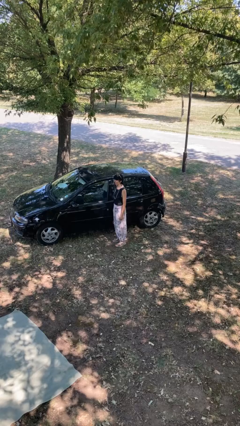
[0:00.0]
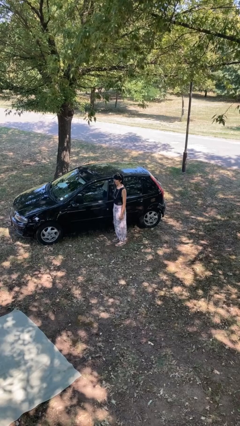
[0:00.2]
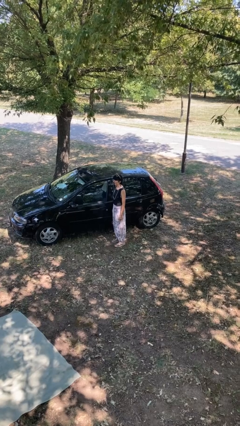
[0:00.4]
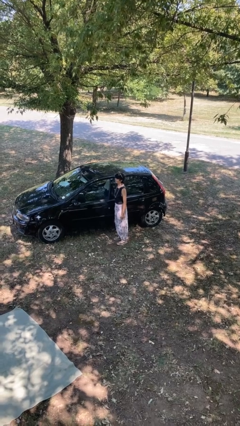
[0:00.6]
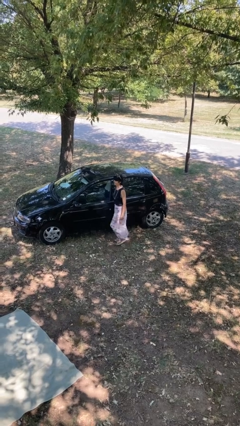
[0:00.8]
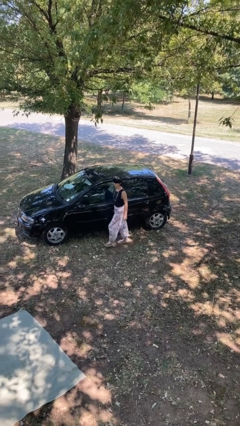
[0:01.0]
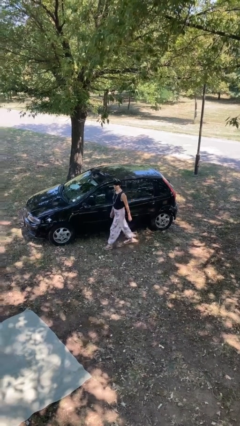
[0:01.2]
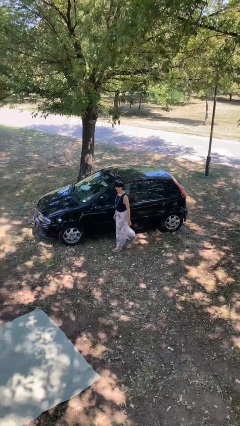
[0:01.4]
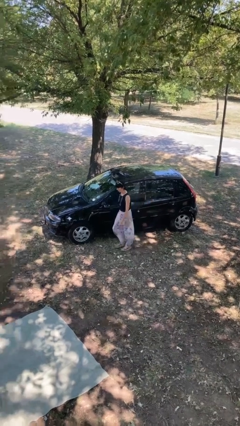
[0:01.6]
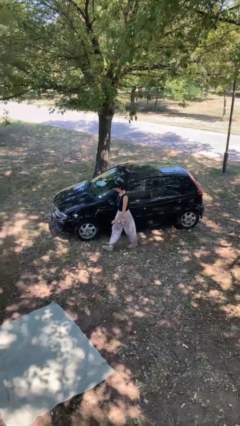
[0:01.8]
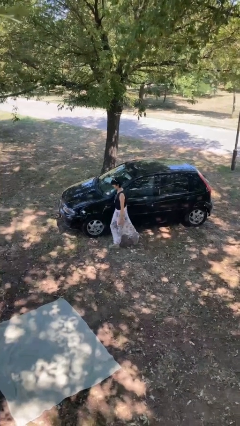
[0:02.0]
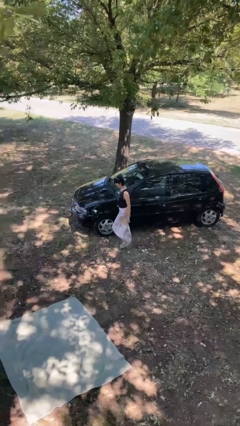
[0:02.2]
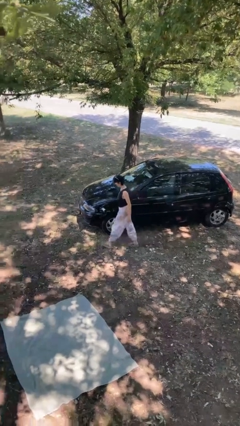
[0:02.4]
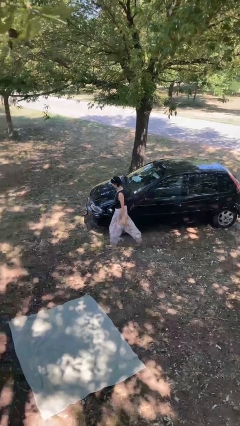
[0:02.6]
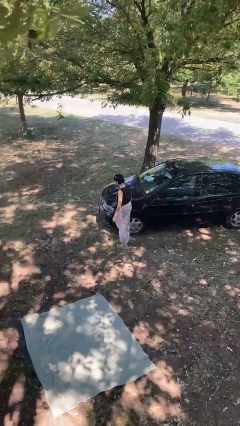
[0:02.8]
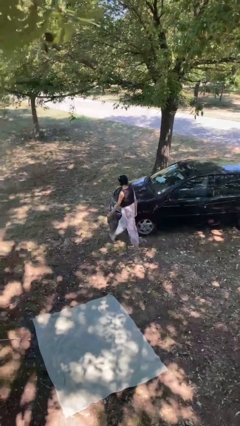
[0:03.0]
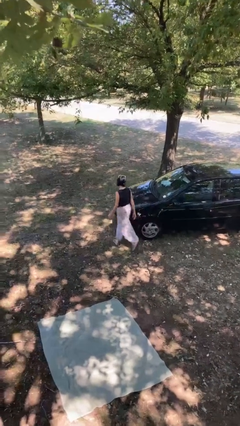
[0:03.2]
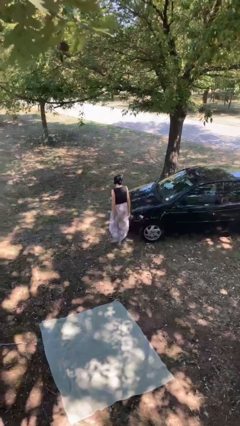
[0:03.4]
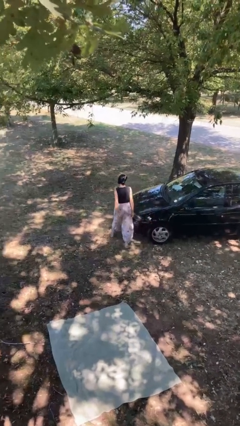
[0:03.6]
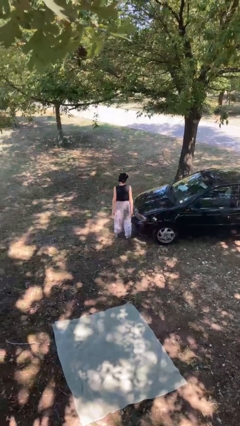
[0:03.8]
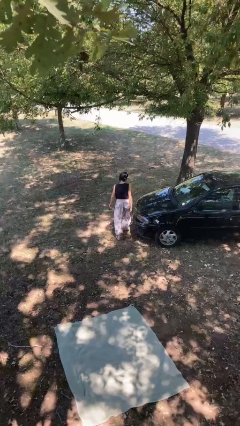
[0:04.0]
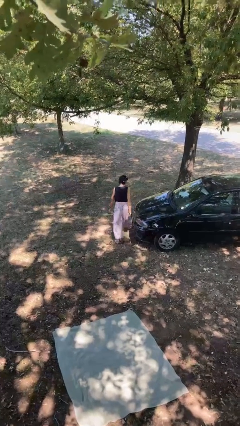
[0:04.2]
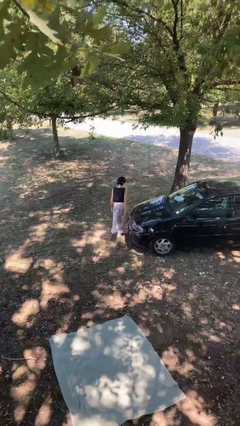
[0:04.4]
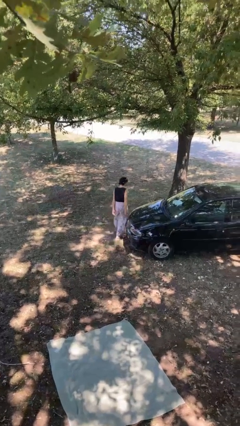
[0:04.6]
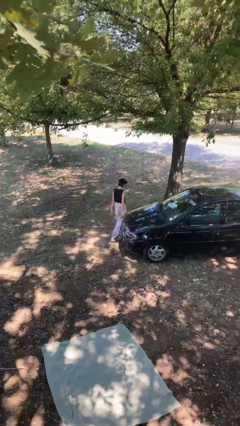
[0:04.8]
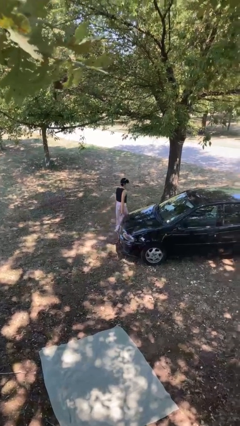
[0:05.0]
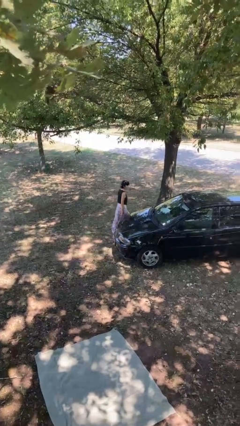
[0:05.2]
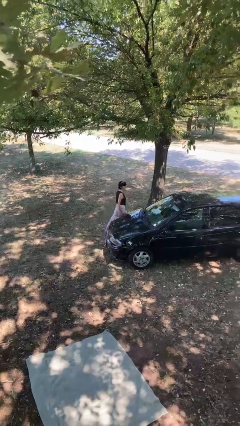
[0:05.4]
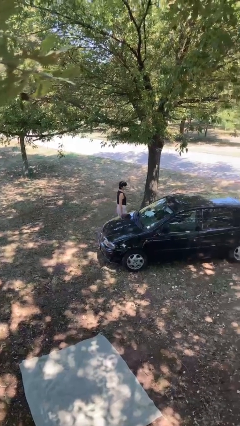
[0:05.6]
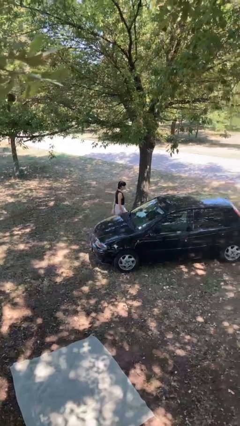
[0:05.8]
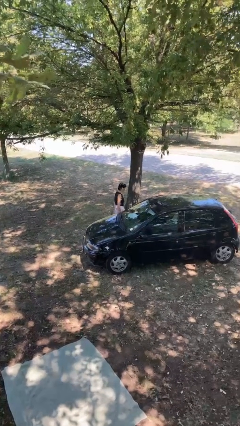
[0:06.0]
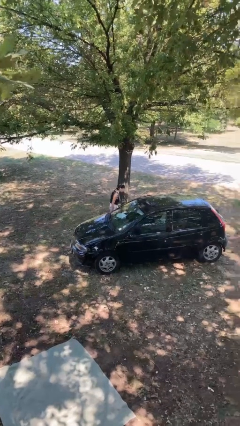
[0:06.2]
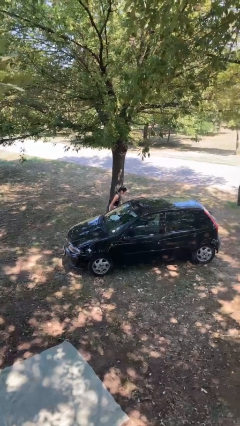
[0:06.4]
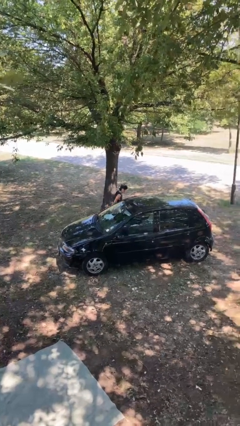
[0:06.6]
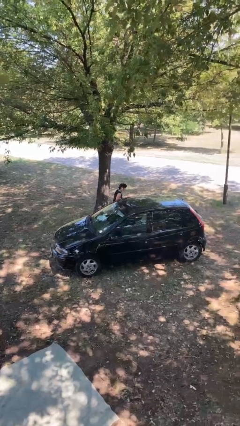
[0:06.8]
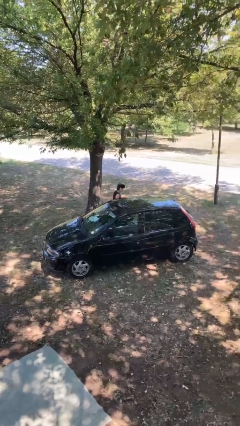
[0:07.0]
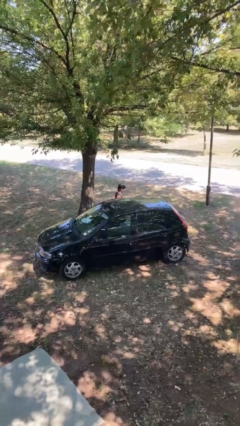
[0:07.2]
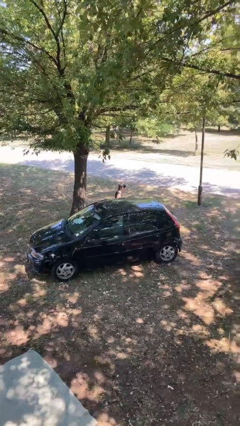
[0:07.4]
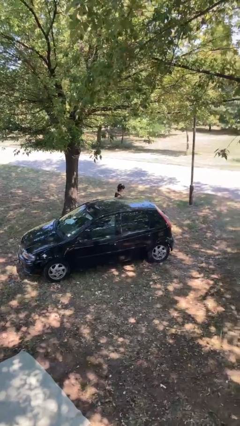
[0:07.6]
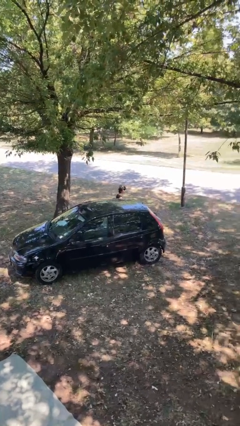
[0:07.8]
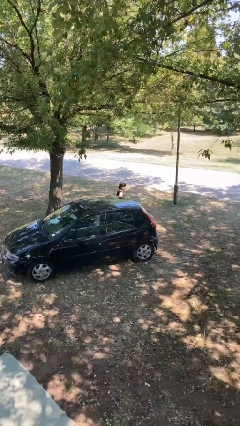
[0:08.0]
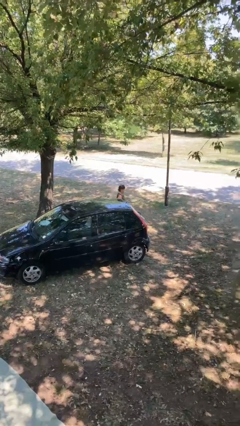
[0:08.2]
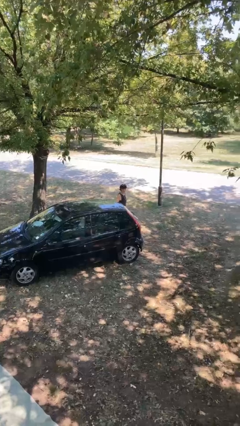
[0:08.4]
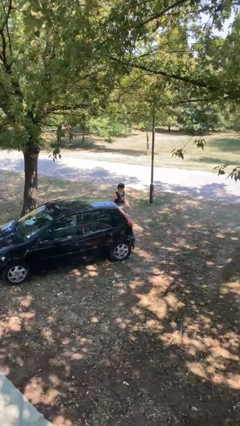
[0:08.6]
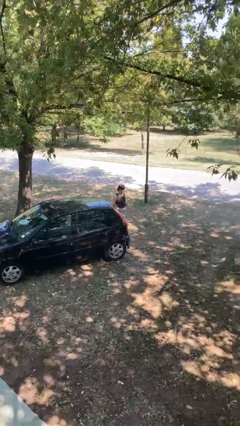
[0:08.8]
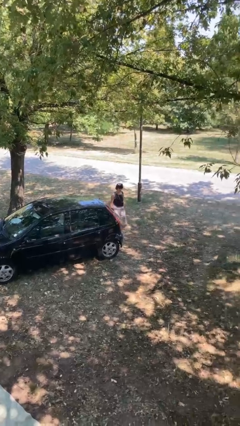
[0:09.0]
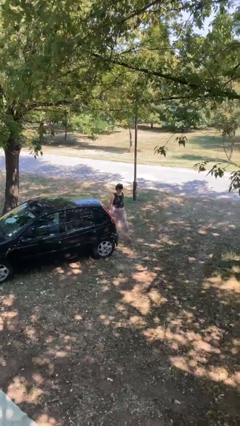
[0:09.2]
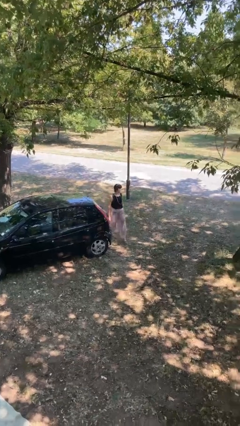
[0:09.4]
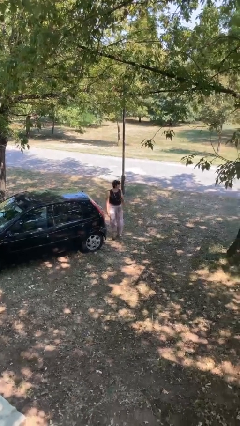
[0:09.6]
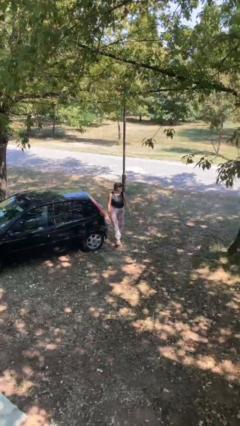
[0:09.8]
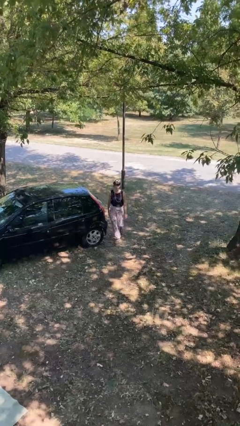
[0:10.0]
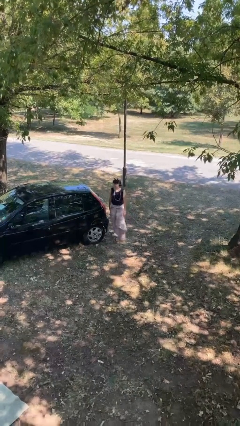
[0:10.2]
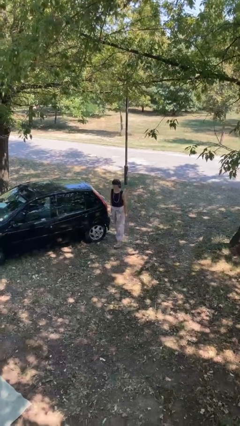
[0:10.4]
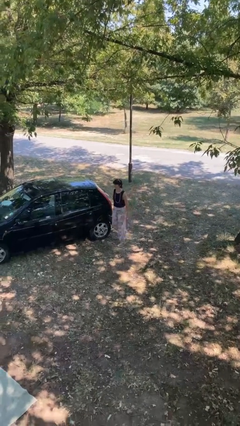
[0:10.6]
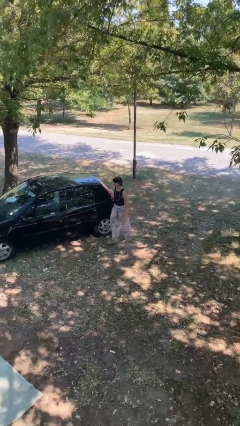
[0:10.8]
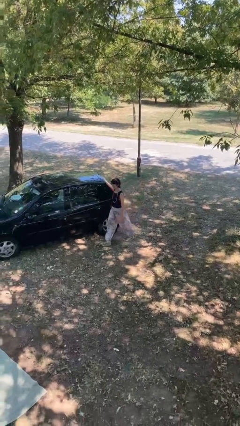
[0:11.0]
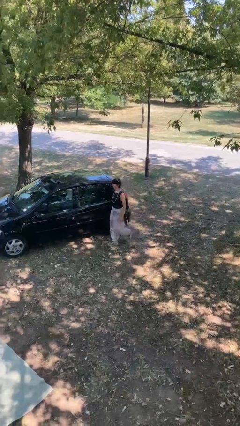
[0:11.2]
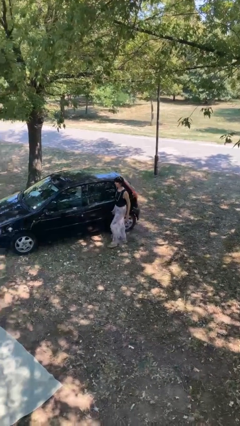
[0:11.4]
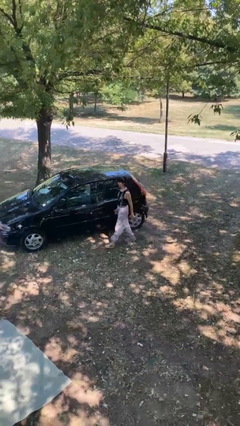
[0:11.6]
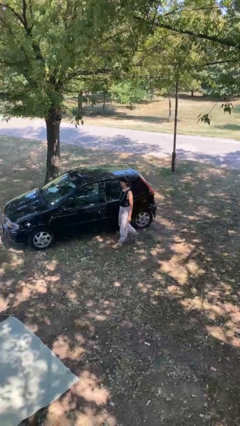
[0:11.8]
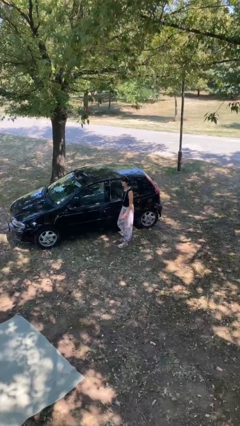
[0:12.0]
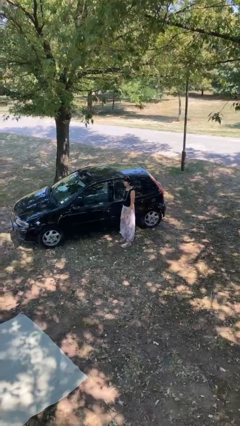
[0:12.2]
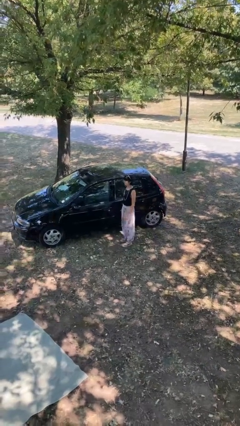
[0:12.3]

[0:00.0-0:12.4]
person walks around car

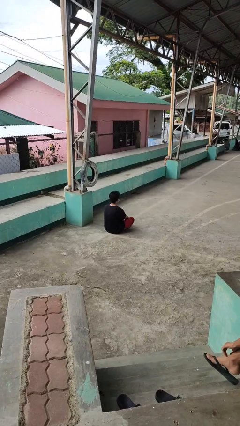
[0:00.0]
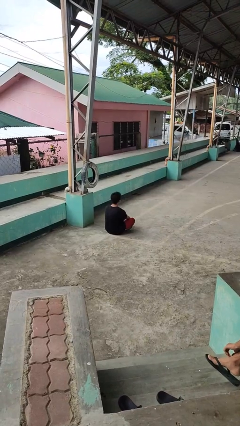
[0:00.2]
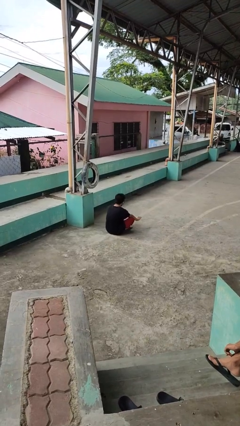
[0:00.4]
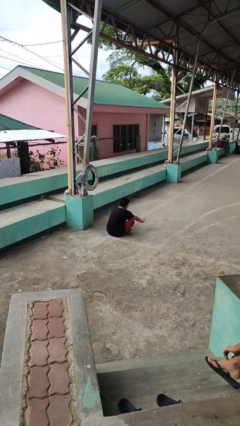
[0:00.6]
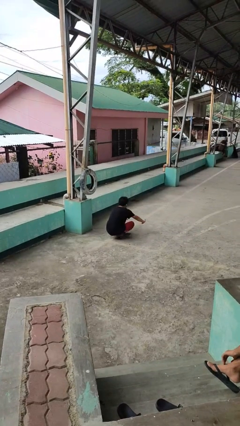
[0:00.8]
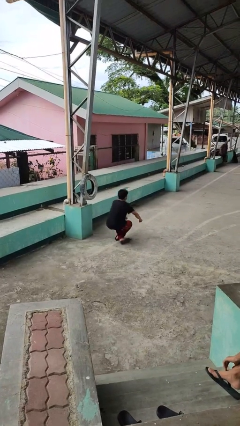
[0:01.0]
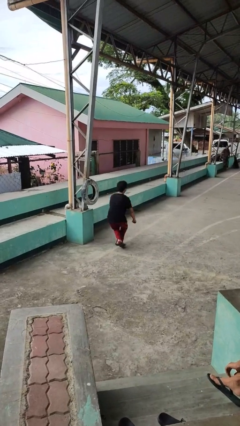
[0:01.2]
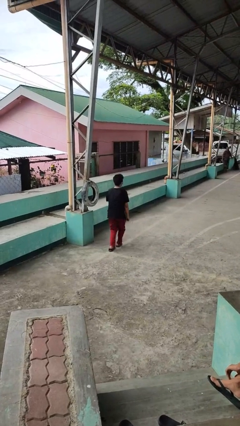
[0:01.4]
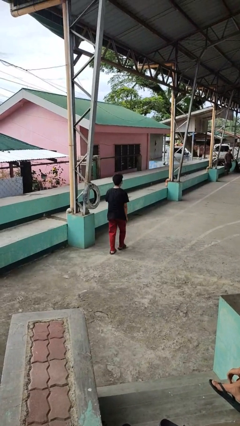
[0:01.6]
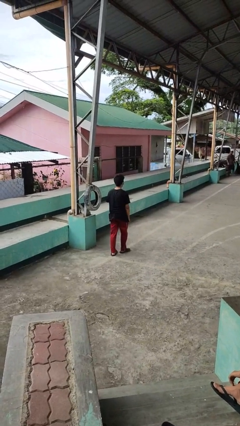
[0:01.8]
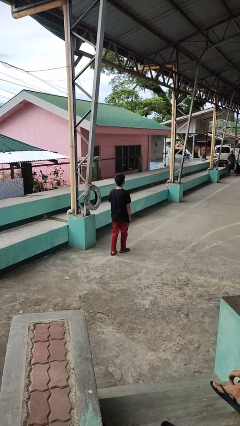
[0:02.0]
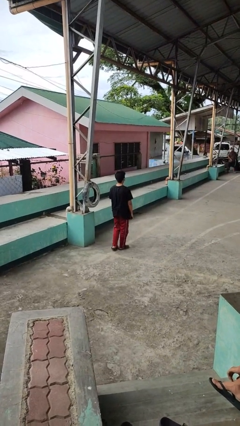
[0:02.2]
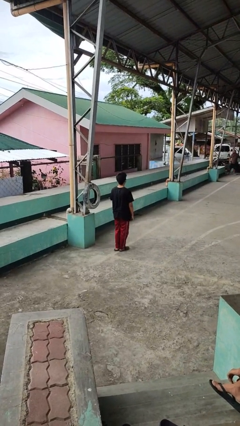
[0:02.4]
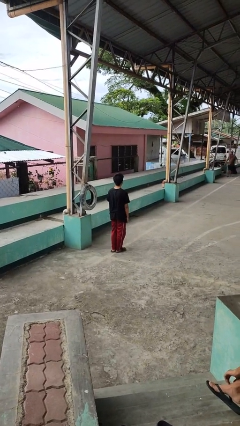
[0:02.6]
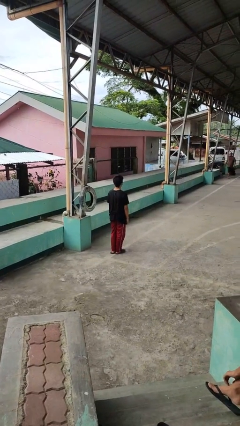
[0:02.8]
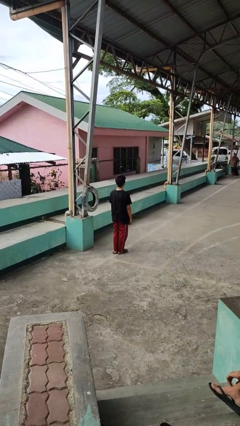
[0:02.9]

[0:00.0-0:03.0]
person stands up from floor

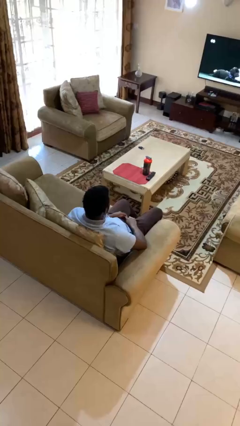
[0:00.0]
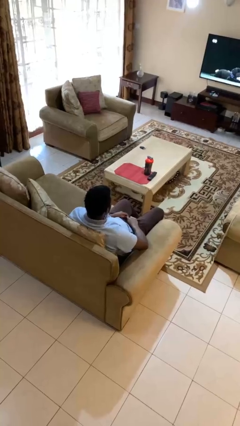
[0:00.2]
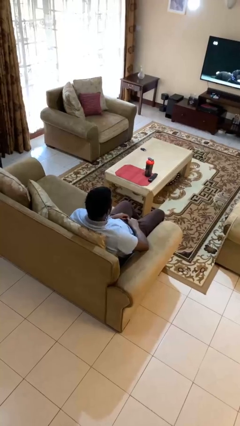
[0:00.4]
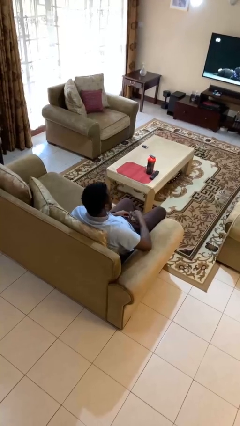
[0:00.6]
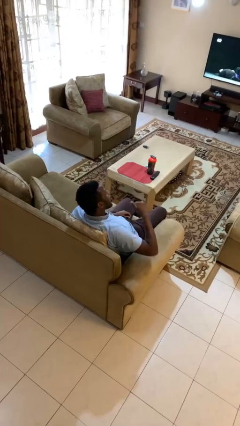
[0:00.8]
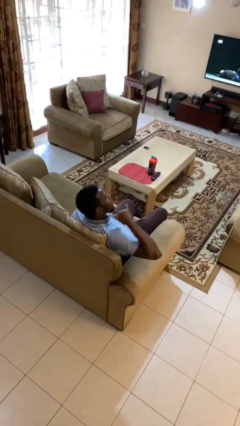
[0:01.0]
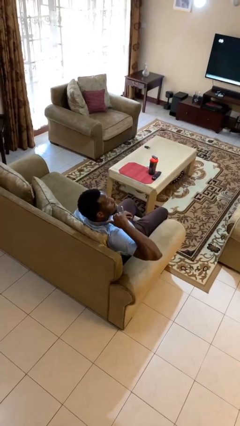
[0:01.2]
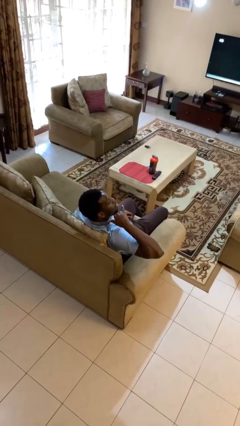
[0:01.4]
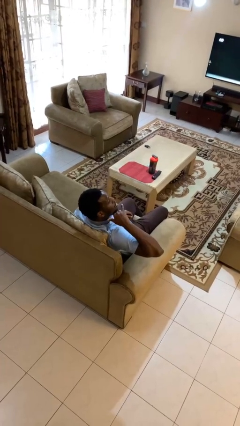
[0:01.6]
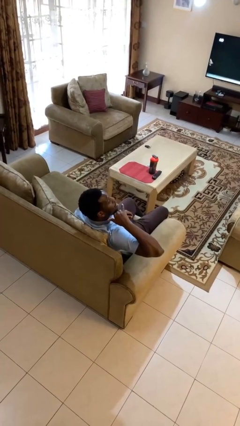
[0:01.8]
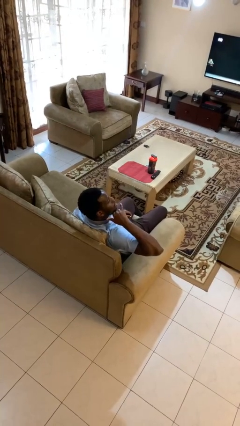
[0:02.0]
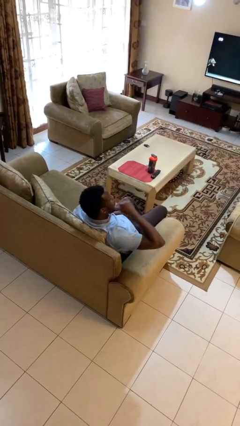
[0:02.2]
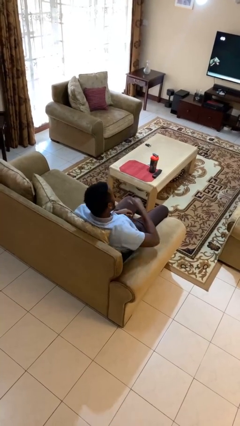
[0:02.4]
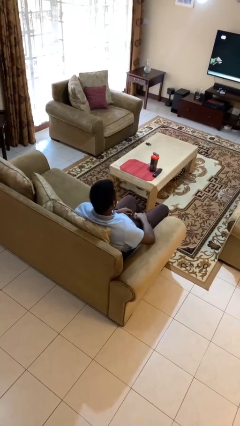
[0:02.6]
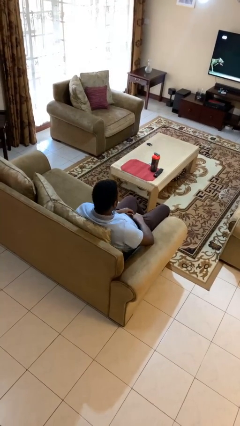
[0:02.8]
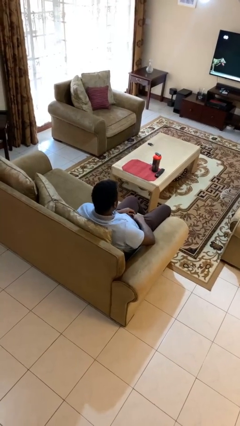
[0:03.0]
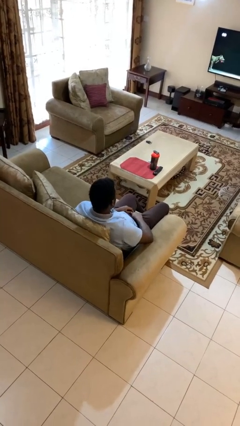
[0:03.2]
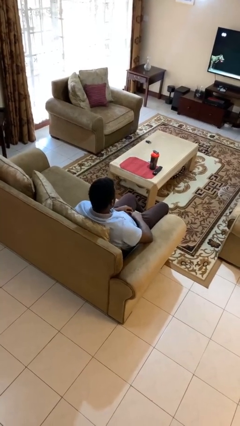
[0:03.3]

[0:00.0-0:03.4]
person gestures call me
